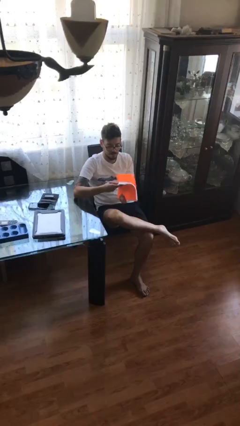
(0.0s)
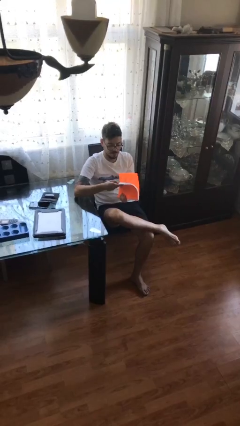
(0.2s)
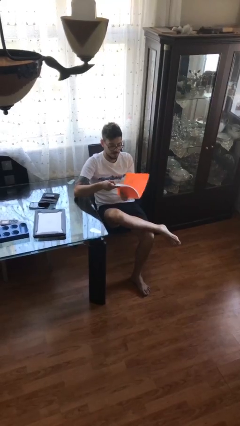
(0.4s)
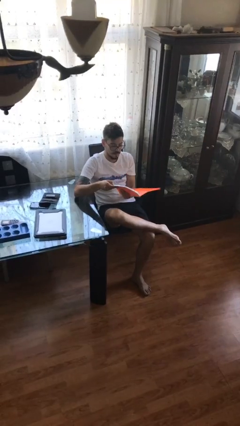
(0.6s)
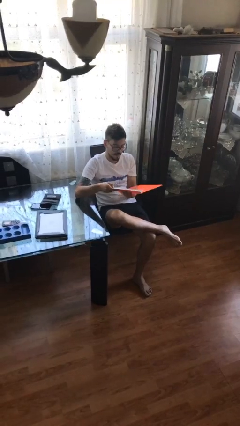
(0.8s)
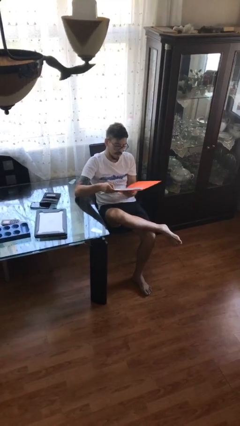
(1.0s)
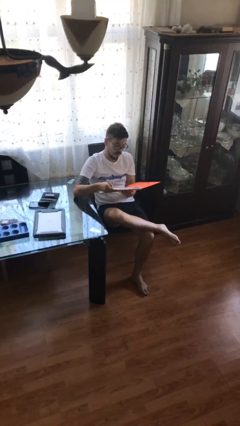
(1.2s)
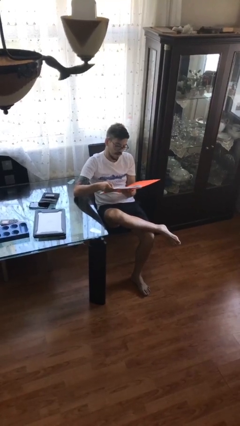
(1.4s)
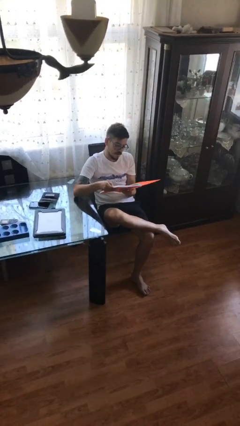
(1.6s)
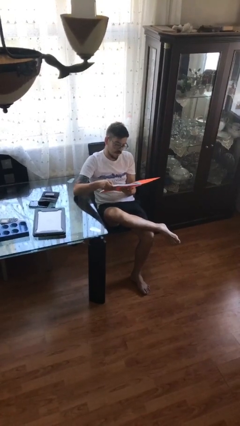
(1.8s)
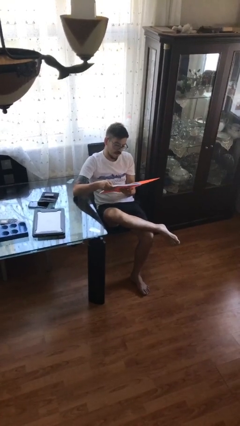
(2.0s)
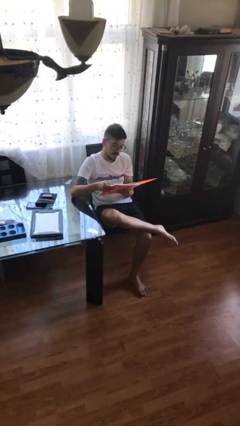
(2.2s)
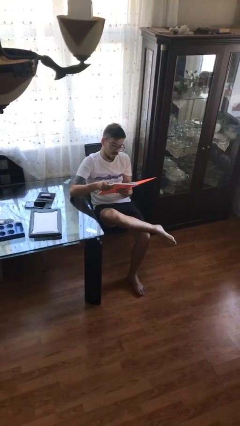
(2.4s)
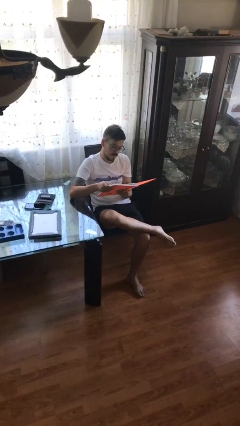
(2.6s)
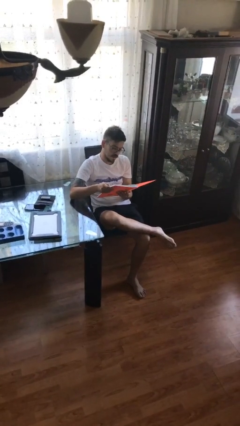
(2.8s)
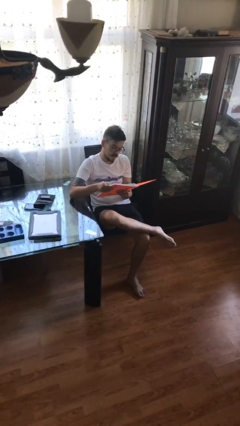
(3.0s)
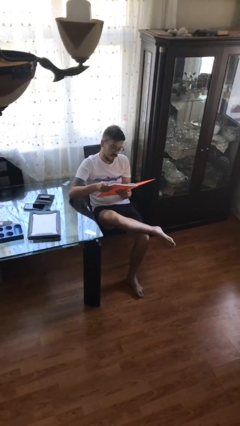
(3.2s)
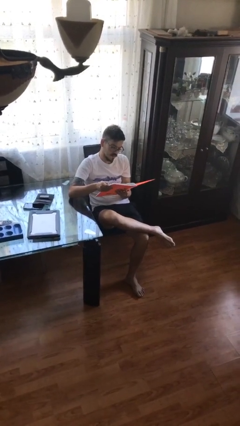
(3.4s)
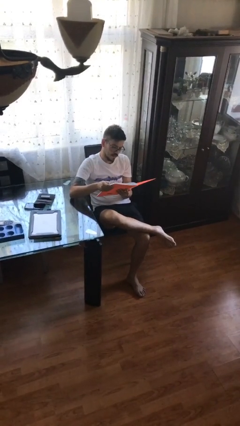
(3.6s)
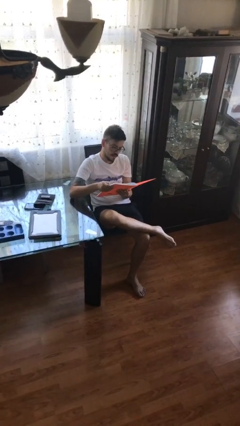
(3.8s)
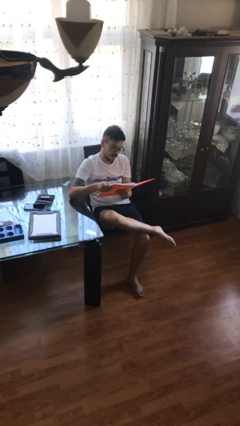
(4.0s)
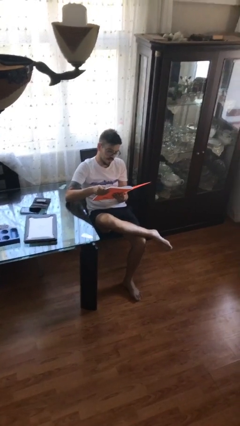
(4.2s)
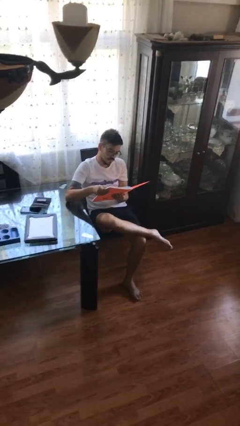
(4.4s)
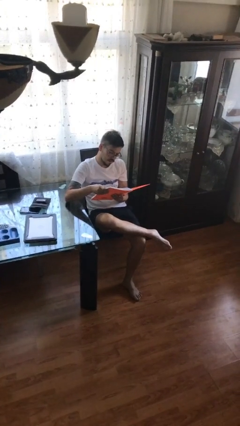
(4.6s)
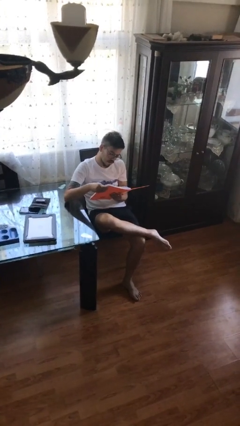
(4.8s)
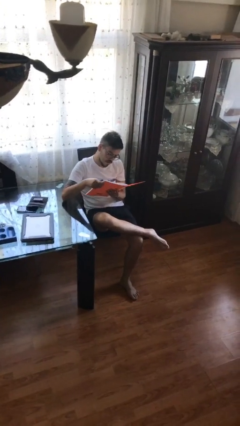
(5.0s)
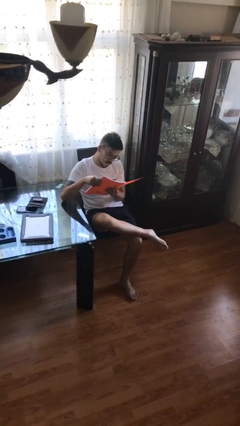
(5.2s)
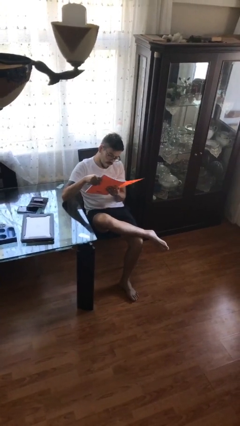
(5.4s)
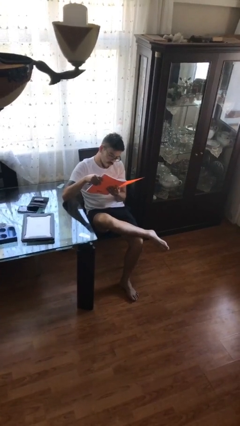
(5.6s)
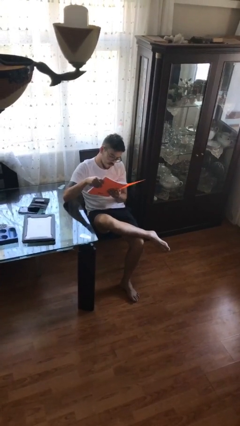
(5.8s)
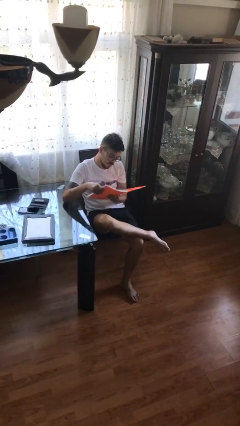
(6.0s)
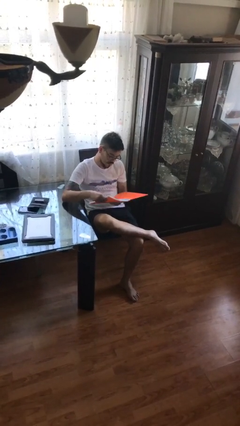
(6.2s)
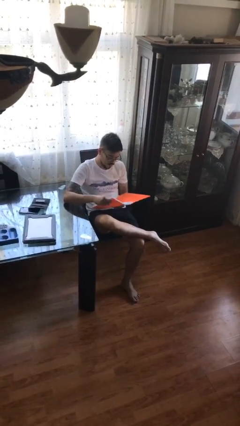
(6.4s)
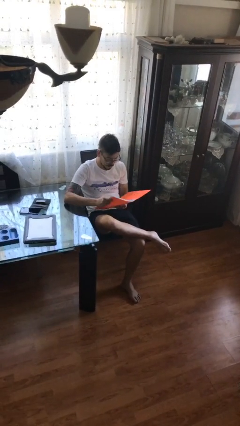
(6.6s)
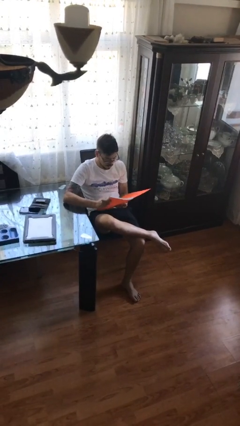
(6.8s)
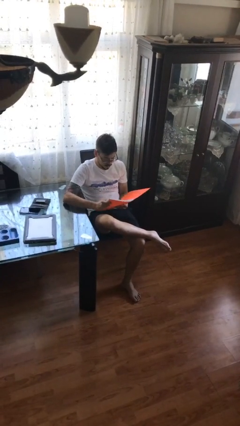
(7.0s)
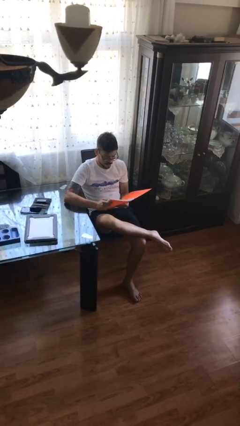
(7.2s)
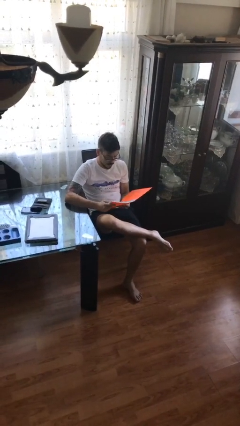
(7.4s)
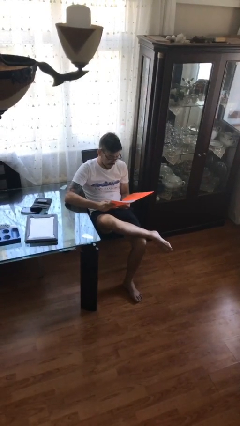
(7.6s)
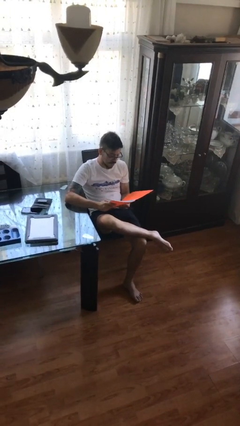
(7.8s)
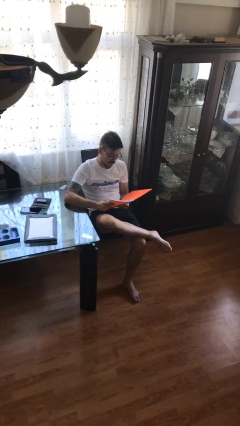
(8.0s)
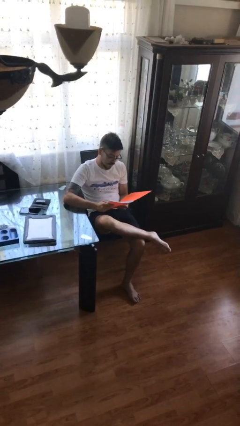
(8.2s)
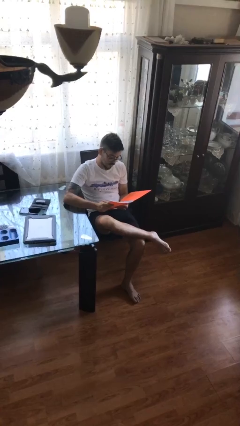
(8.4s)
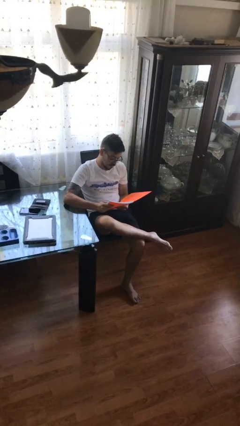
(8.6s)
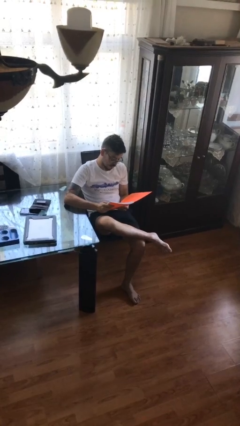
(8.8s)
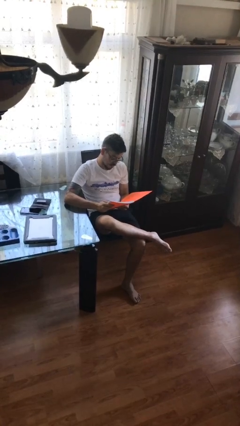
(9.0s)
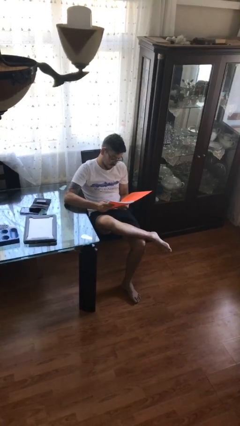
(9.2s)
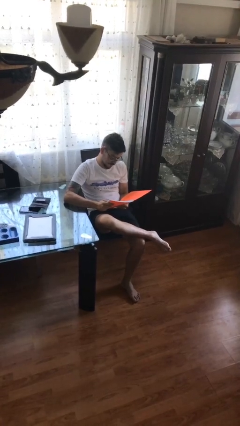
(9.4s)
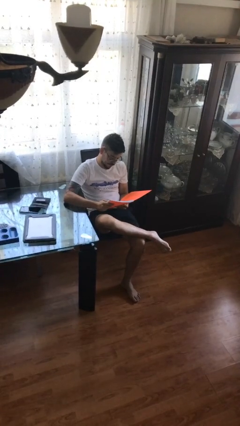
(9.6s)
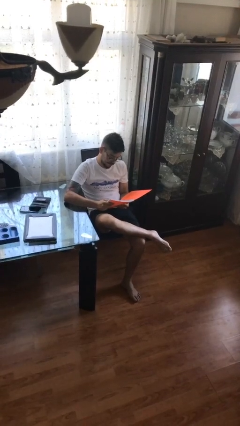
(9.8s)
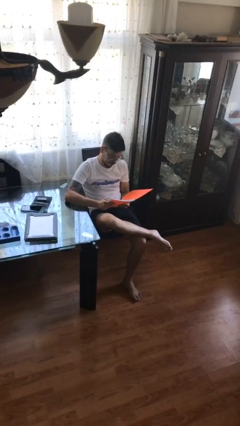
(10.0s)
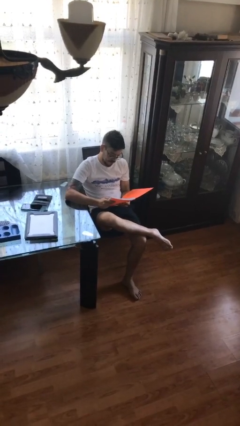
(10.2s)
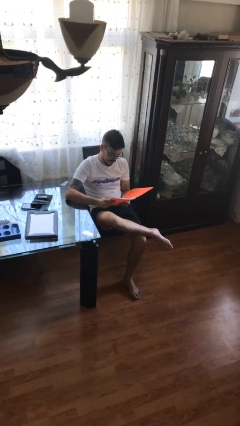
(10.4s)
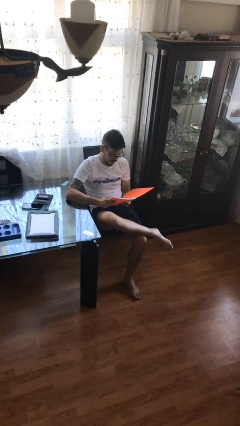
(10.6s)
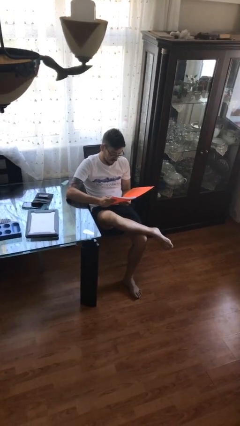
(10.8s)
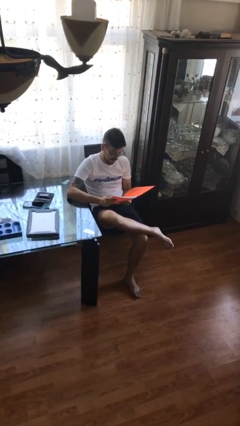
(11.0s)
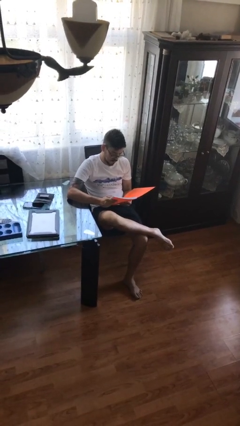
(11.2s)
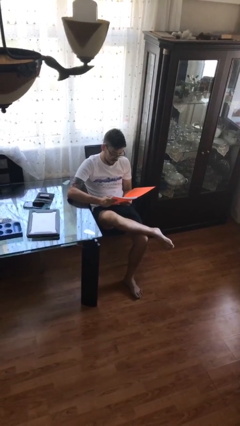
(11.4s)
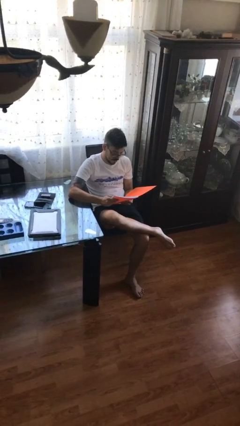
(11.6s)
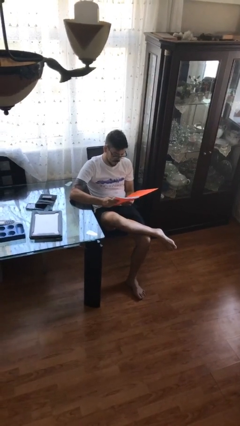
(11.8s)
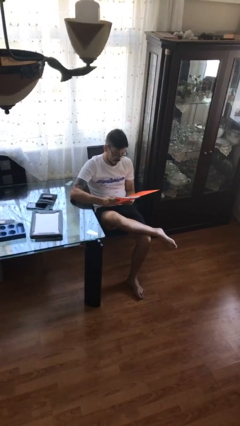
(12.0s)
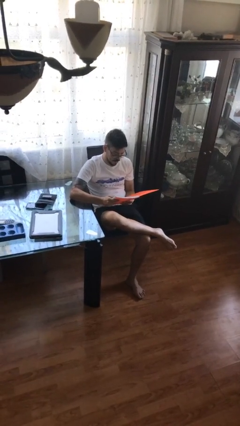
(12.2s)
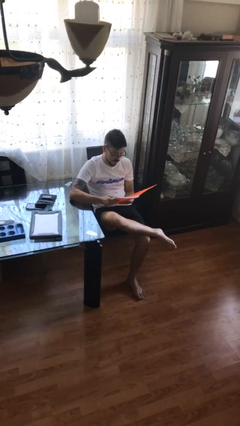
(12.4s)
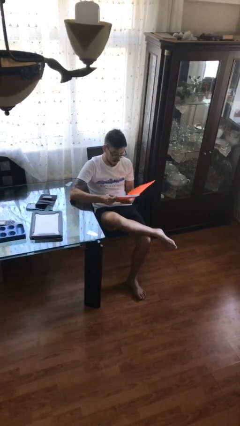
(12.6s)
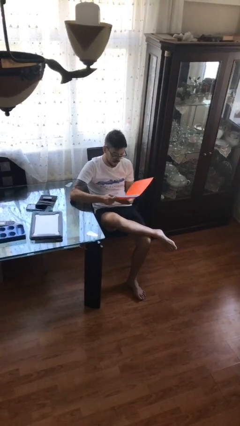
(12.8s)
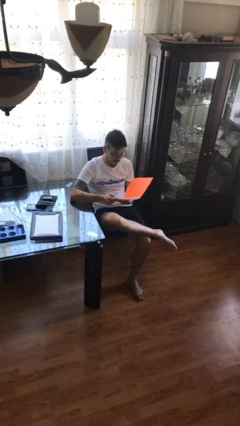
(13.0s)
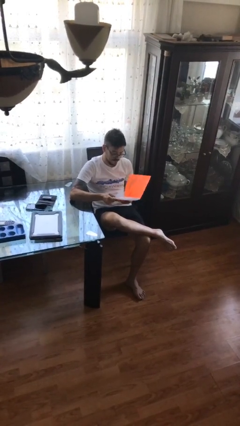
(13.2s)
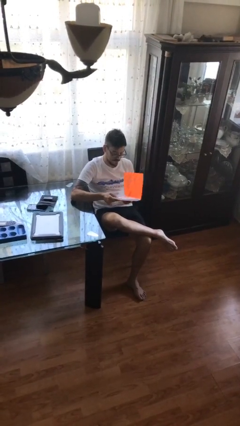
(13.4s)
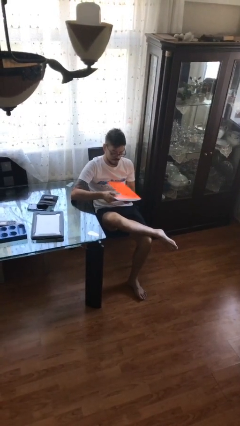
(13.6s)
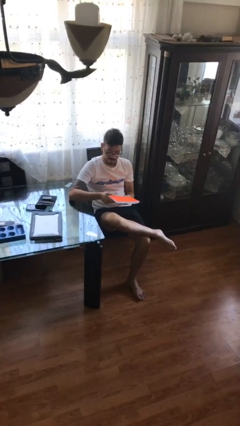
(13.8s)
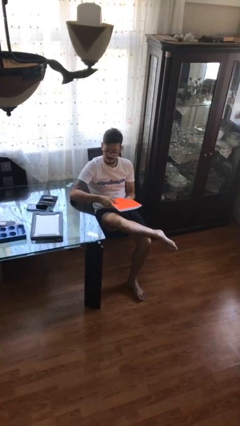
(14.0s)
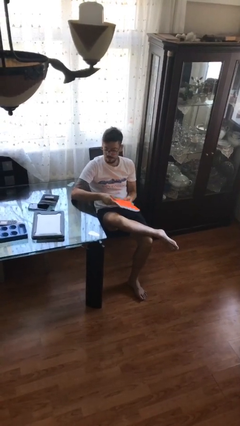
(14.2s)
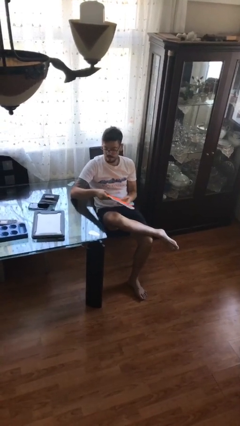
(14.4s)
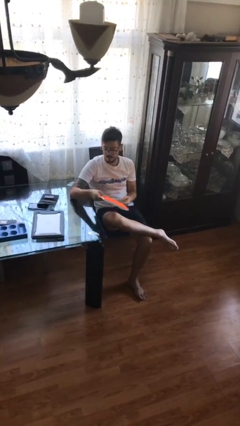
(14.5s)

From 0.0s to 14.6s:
person reads document

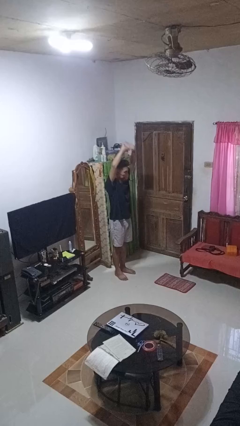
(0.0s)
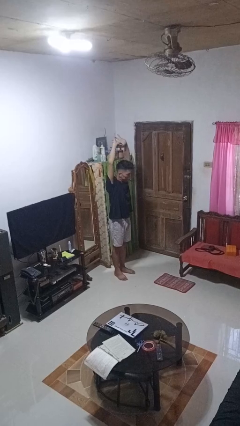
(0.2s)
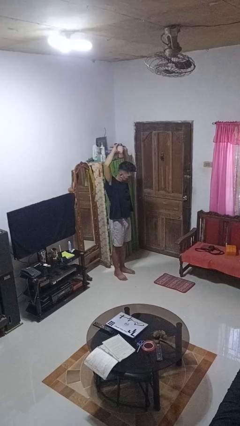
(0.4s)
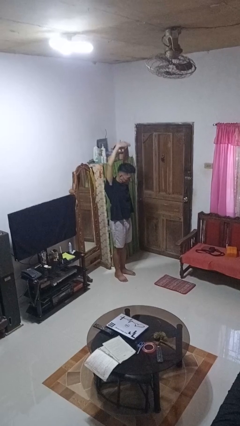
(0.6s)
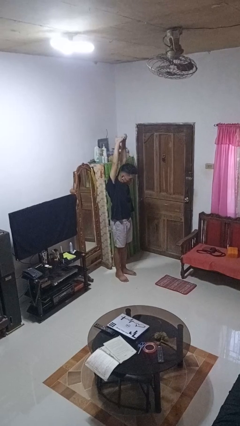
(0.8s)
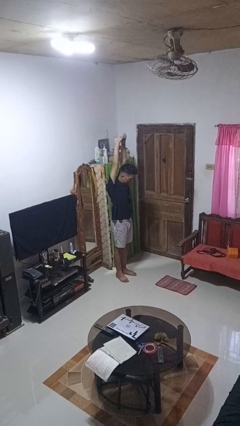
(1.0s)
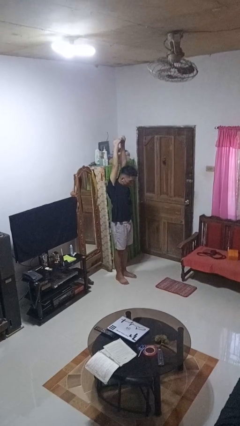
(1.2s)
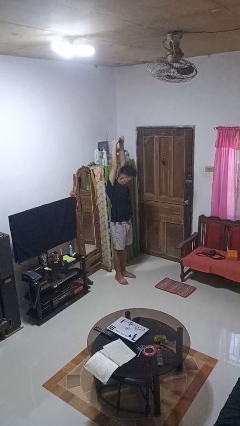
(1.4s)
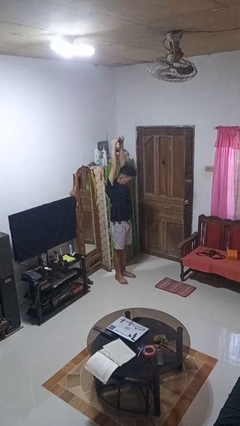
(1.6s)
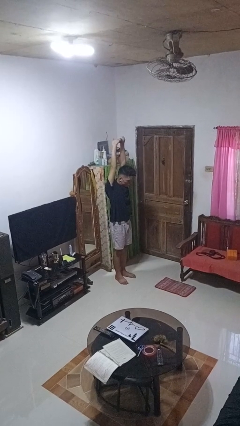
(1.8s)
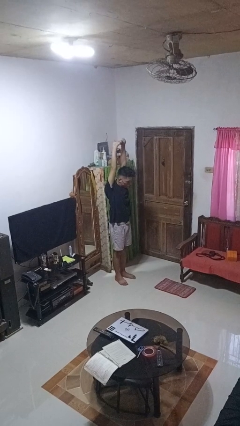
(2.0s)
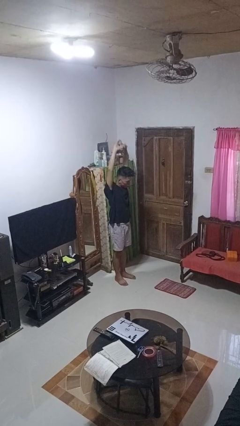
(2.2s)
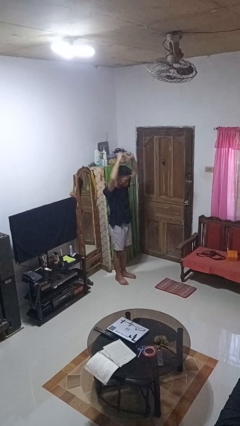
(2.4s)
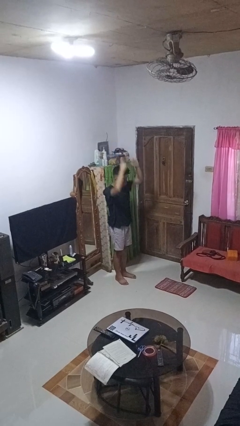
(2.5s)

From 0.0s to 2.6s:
person stretches arms over head

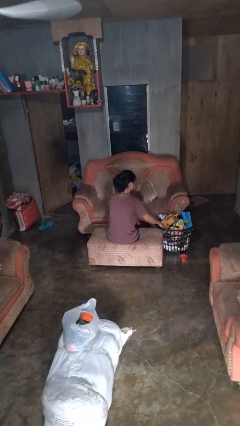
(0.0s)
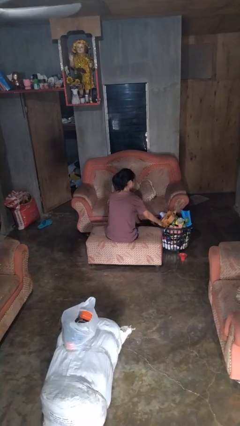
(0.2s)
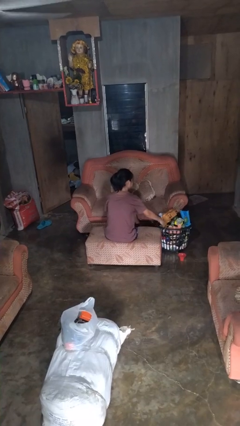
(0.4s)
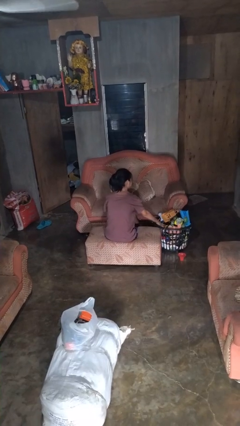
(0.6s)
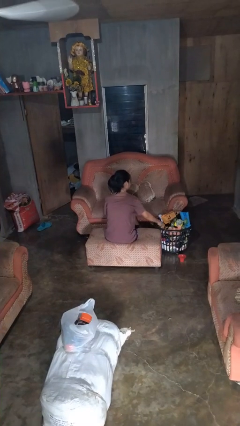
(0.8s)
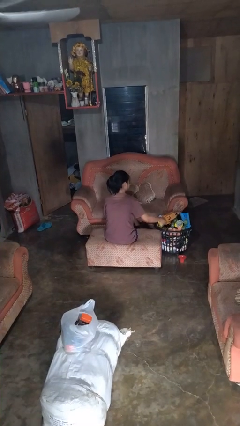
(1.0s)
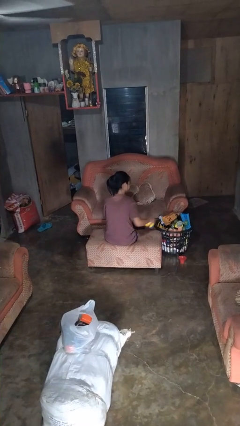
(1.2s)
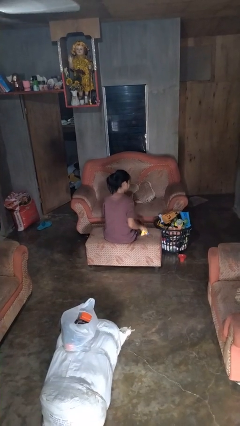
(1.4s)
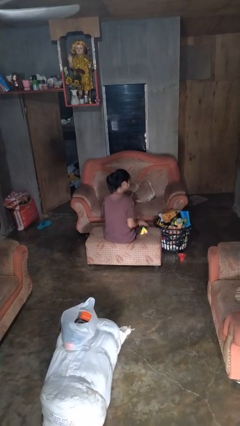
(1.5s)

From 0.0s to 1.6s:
person takes object from basket
